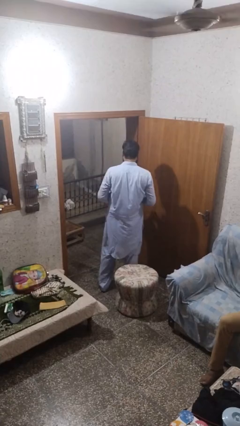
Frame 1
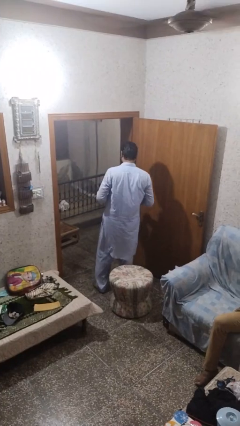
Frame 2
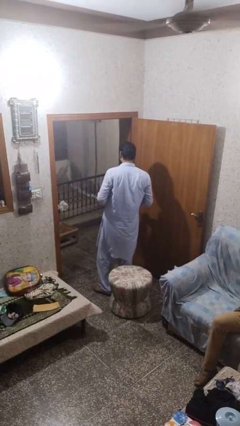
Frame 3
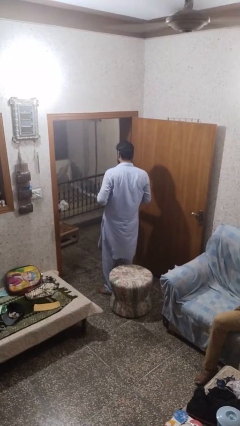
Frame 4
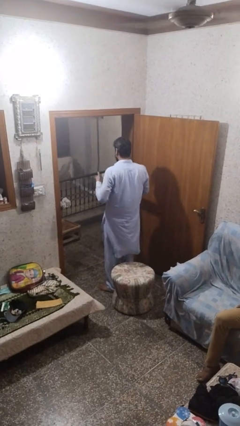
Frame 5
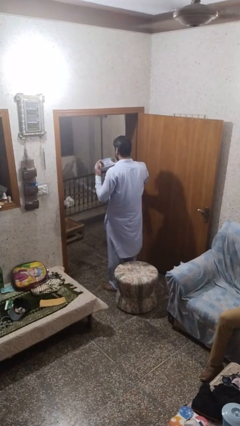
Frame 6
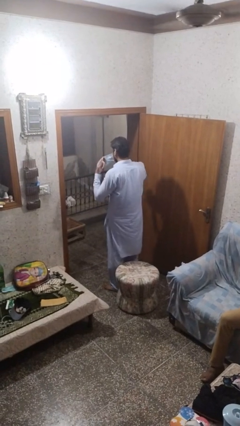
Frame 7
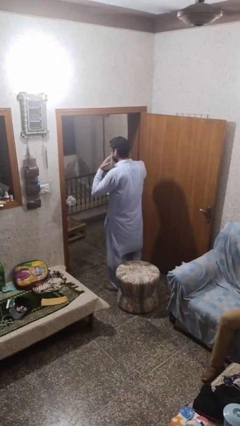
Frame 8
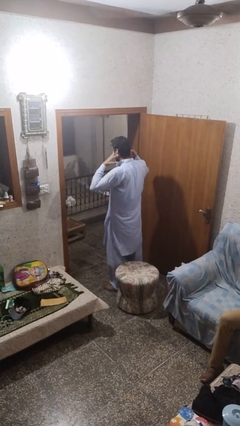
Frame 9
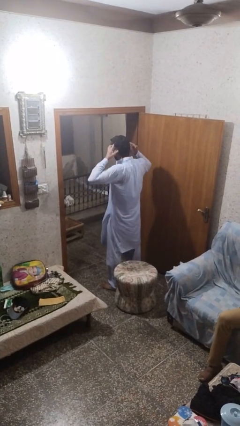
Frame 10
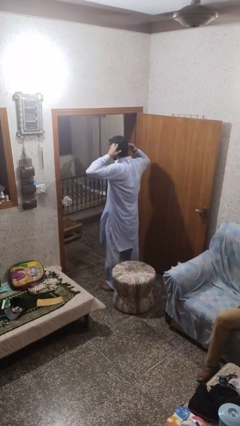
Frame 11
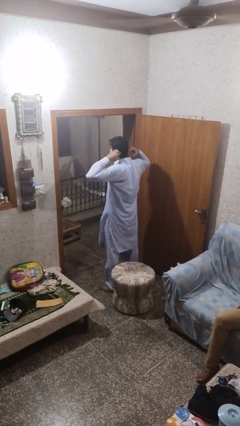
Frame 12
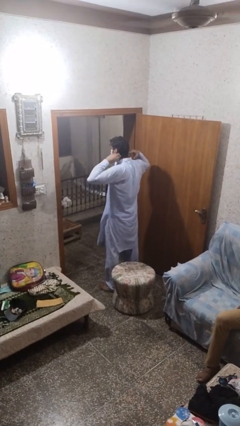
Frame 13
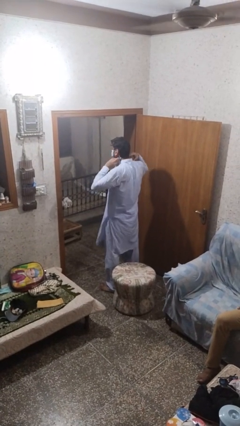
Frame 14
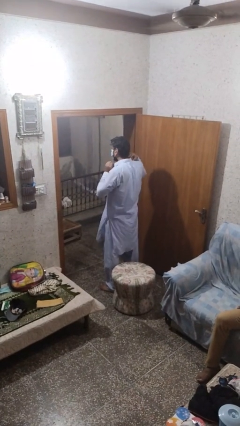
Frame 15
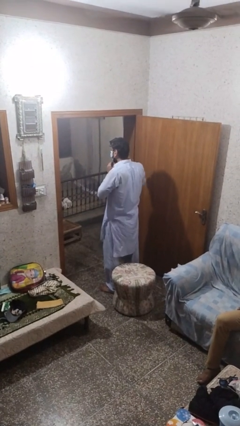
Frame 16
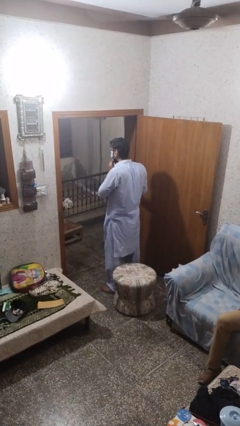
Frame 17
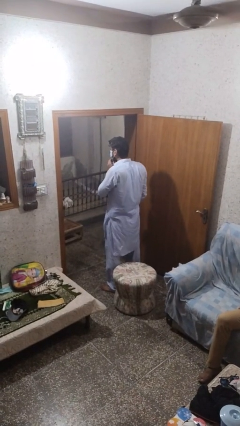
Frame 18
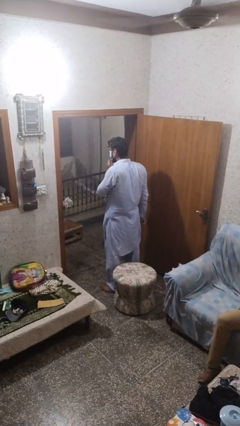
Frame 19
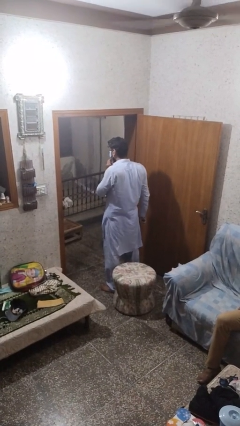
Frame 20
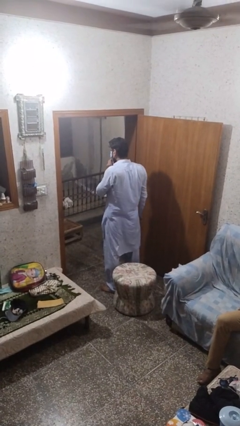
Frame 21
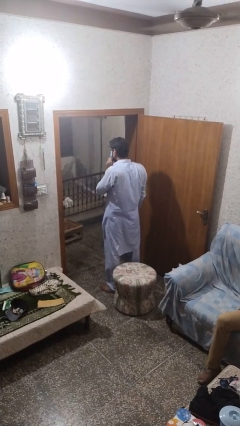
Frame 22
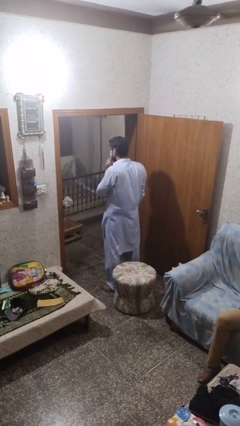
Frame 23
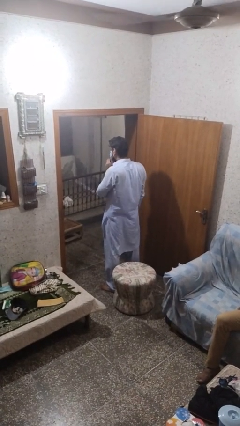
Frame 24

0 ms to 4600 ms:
person puts on facemask

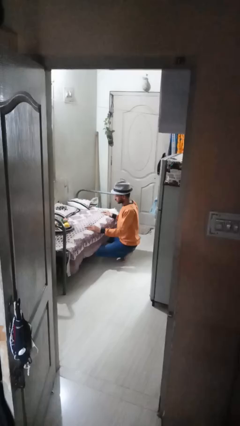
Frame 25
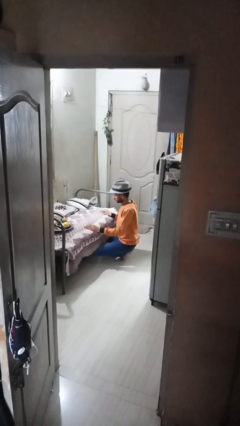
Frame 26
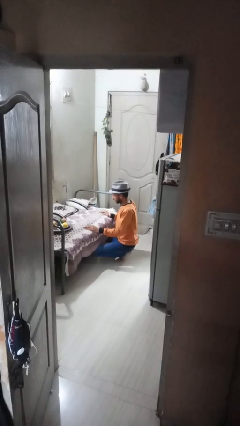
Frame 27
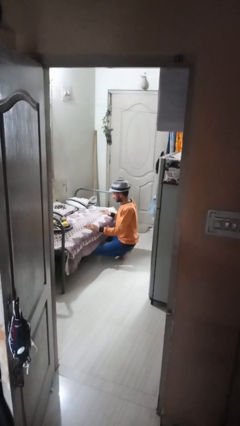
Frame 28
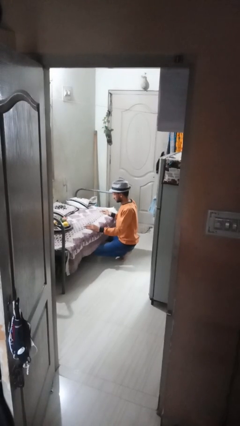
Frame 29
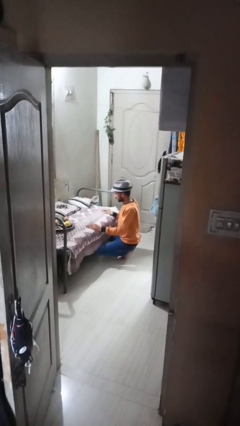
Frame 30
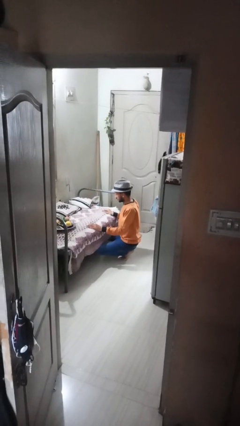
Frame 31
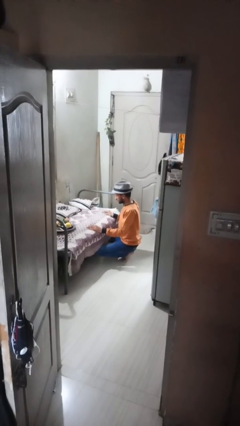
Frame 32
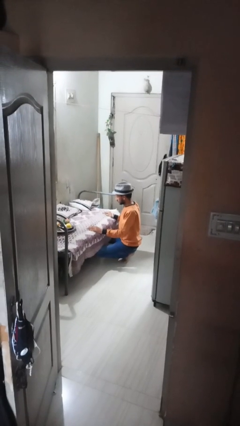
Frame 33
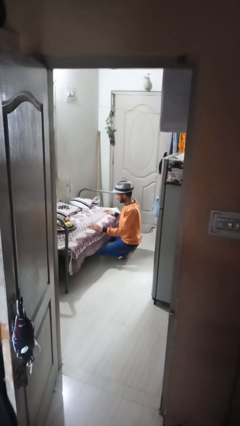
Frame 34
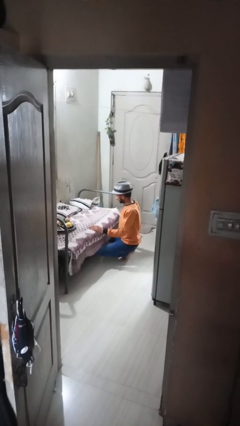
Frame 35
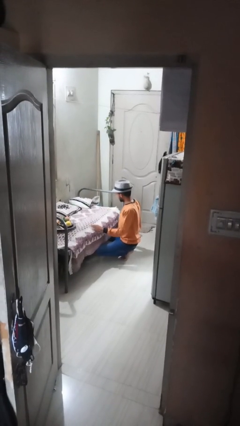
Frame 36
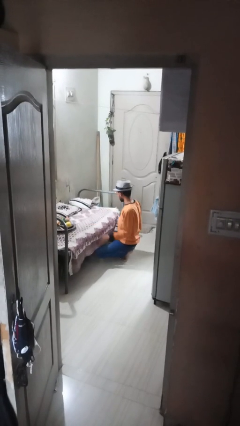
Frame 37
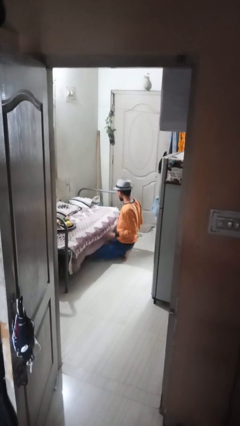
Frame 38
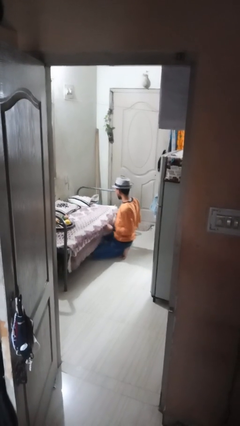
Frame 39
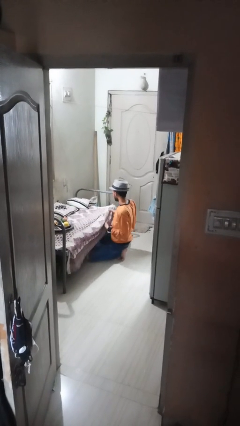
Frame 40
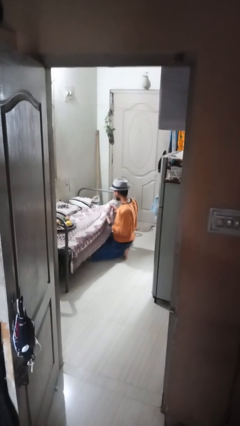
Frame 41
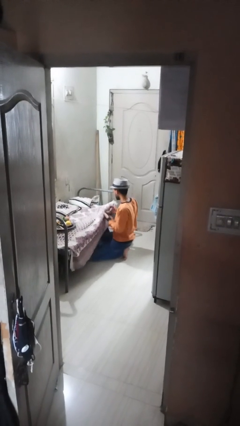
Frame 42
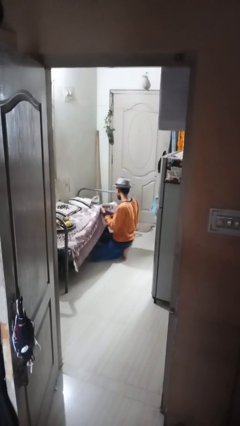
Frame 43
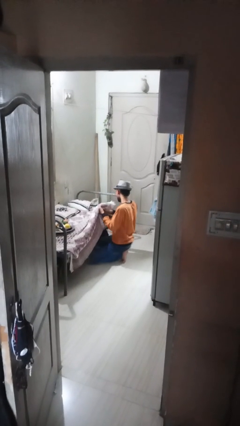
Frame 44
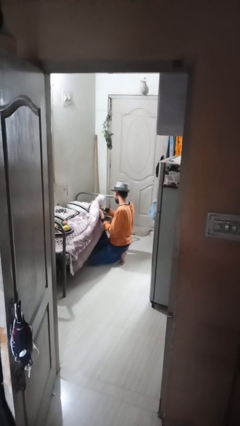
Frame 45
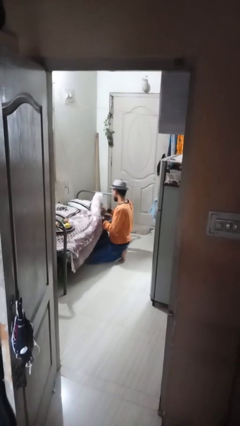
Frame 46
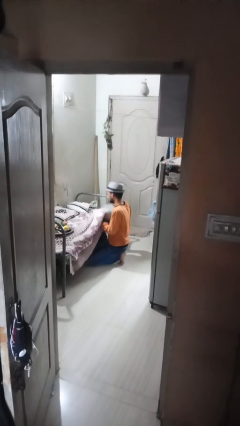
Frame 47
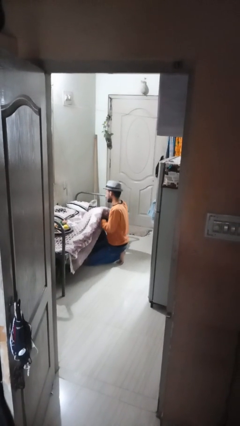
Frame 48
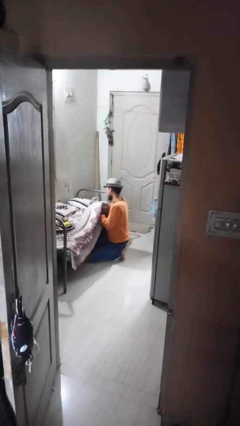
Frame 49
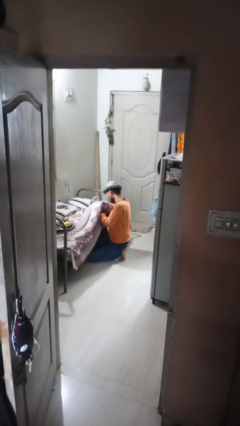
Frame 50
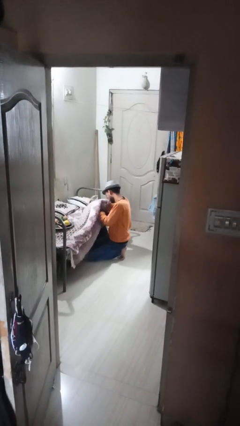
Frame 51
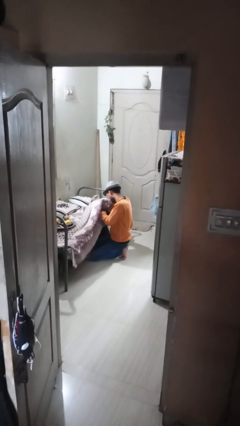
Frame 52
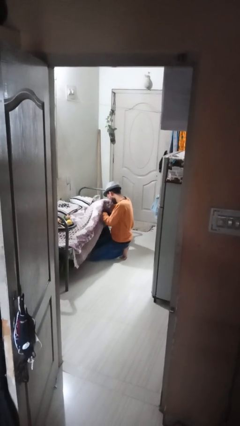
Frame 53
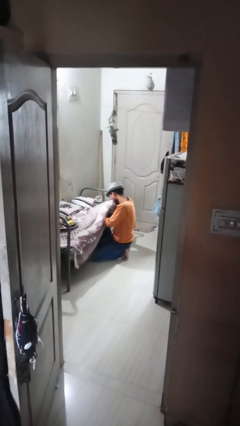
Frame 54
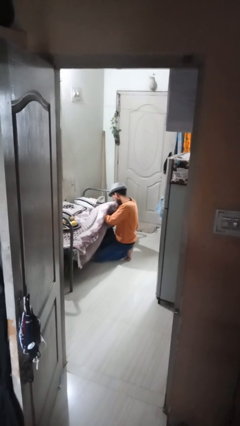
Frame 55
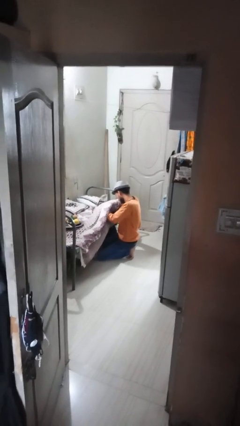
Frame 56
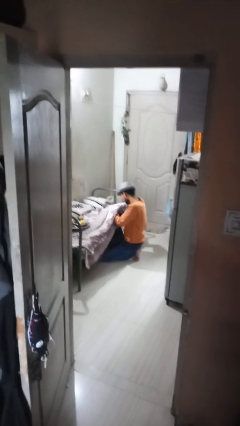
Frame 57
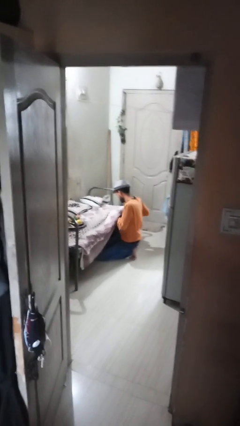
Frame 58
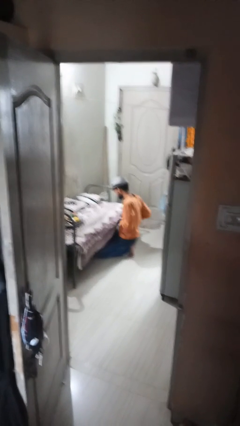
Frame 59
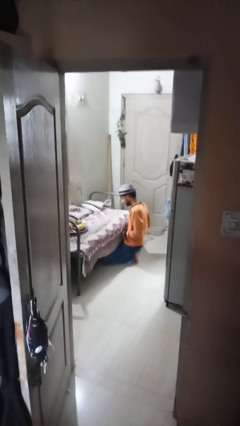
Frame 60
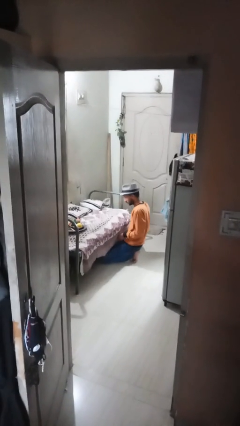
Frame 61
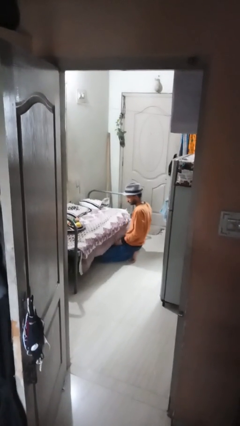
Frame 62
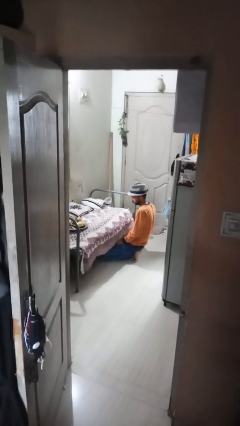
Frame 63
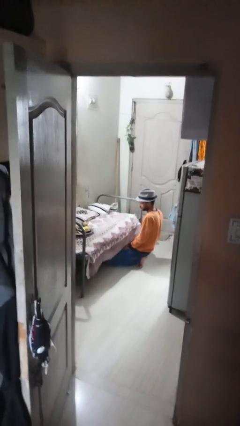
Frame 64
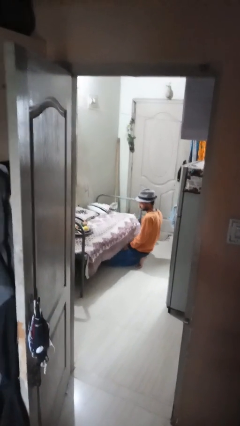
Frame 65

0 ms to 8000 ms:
person searches under couch

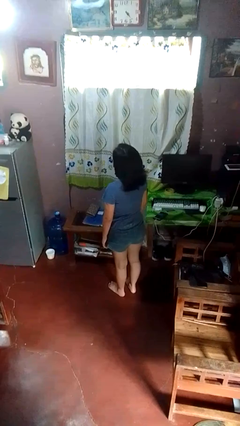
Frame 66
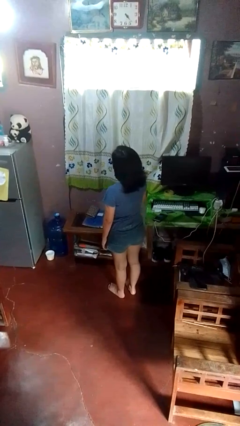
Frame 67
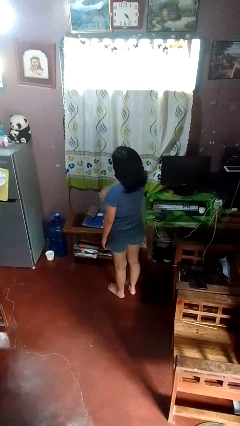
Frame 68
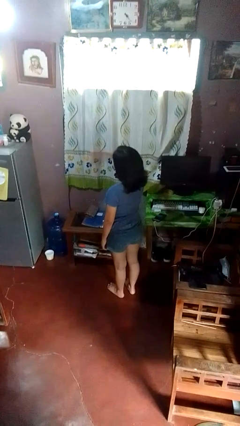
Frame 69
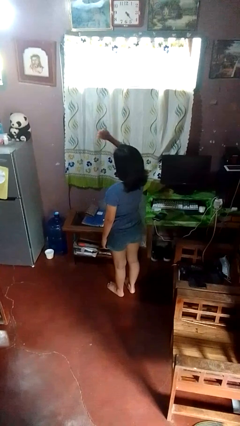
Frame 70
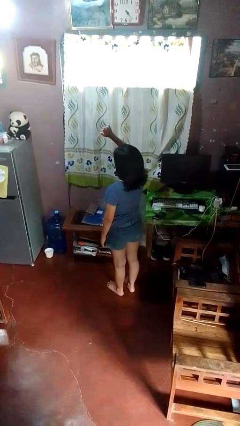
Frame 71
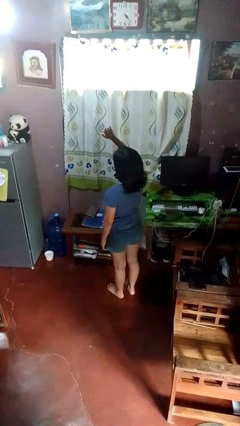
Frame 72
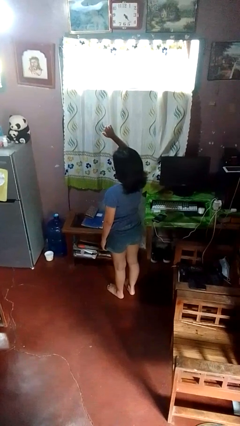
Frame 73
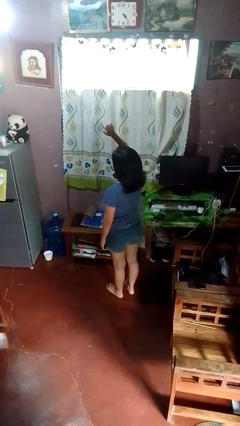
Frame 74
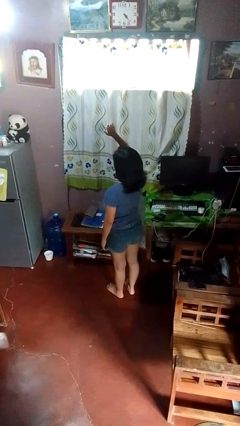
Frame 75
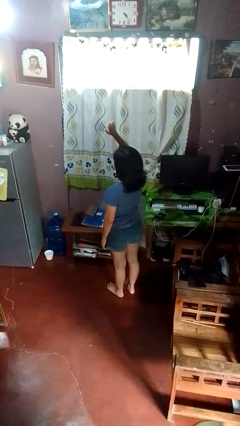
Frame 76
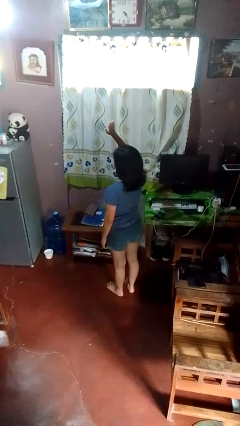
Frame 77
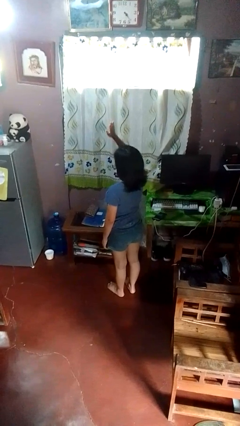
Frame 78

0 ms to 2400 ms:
person gestures swipe up

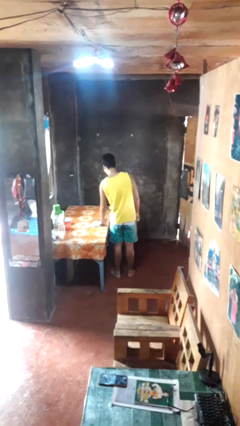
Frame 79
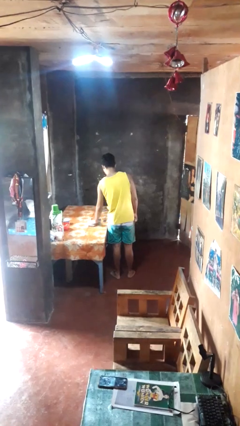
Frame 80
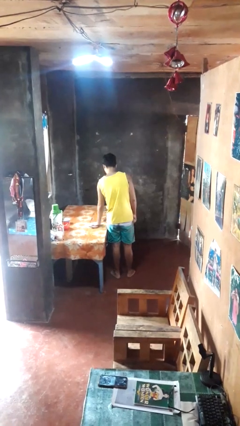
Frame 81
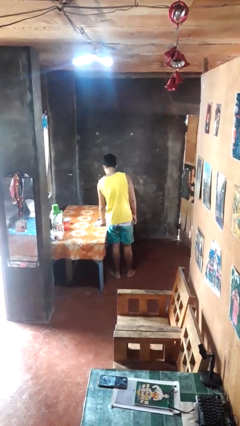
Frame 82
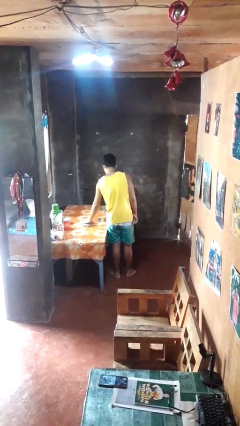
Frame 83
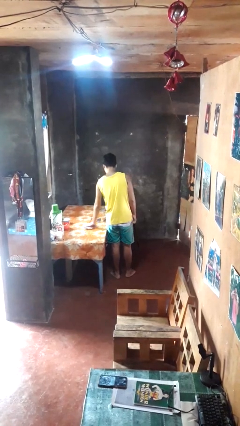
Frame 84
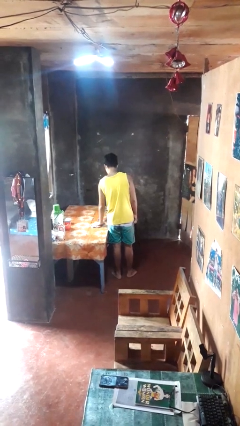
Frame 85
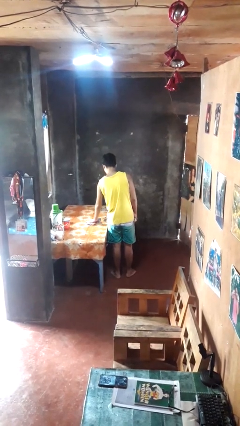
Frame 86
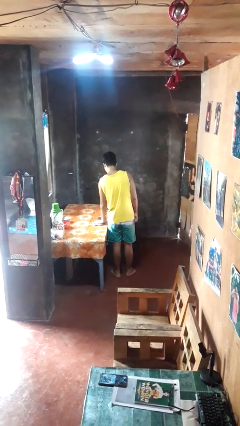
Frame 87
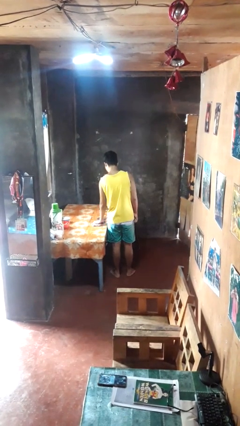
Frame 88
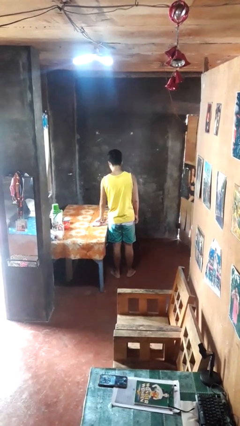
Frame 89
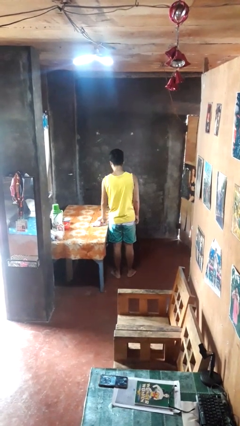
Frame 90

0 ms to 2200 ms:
person cleans table with rag
